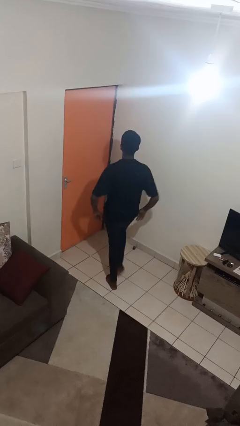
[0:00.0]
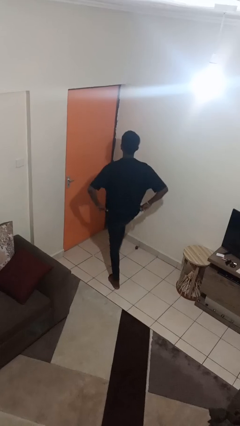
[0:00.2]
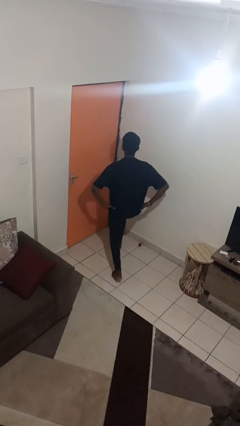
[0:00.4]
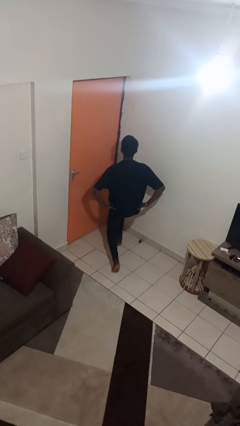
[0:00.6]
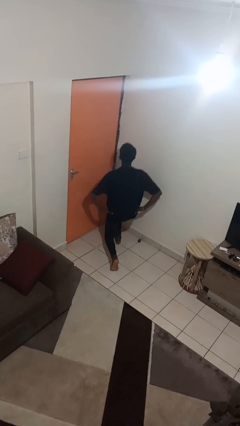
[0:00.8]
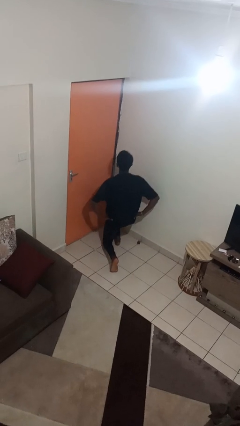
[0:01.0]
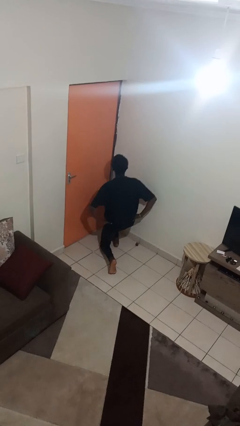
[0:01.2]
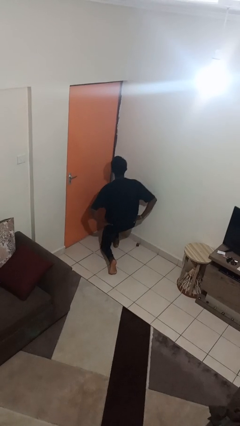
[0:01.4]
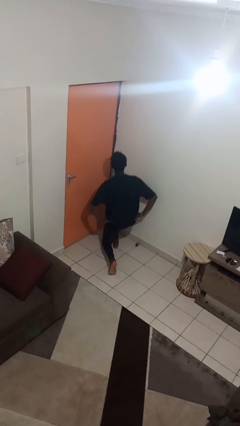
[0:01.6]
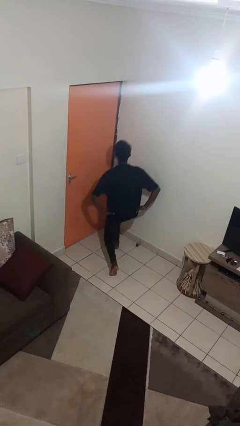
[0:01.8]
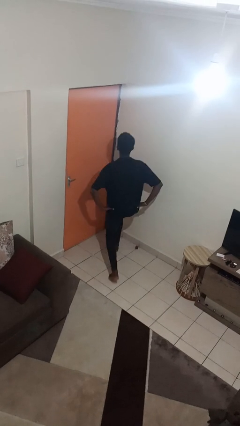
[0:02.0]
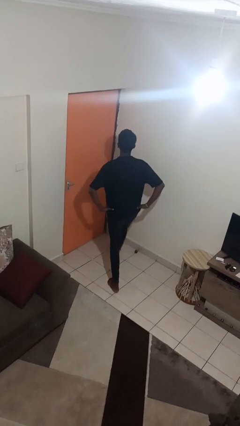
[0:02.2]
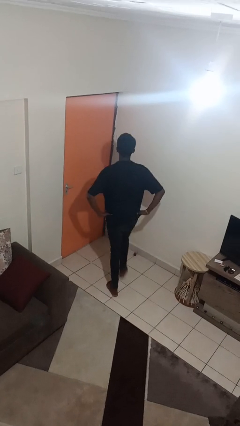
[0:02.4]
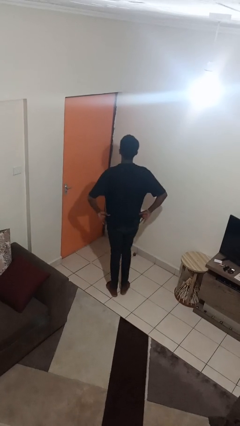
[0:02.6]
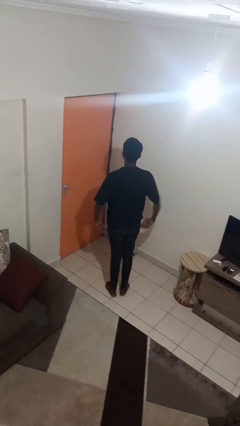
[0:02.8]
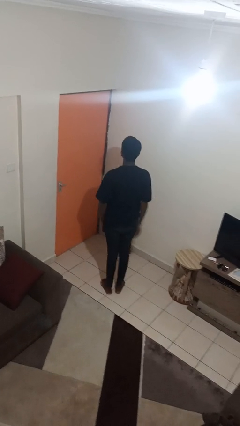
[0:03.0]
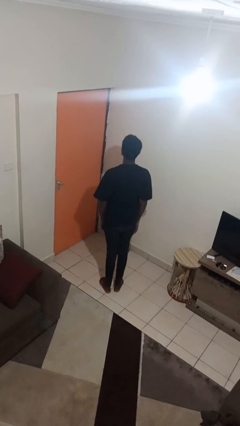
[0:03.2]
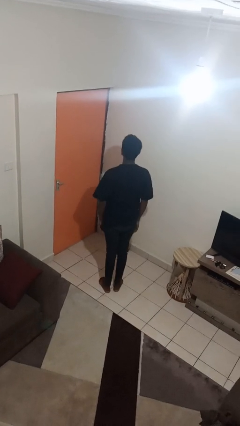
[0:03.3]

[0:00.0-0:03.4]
person exercises with lunges

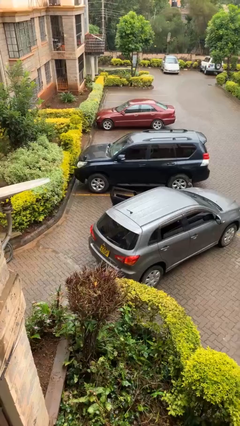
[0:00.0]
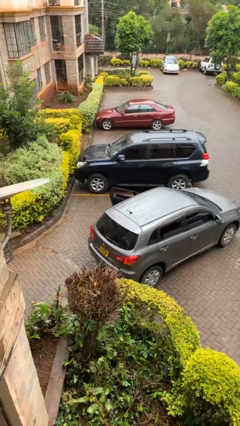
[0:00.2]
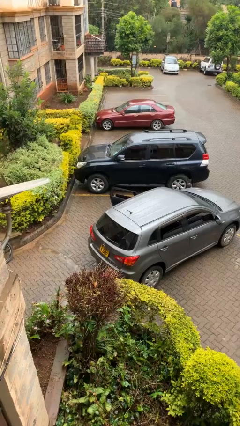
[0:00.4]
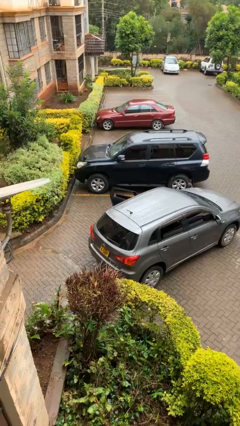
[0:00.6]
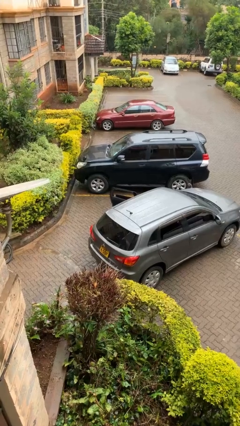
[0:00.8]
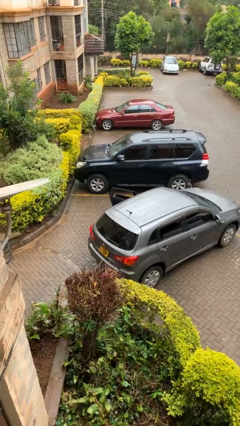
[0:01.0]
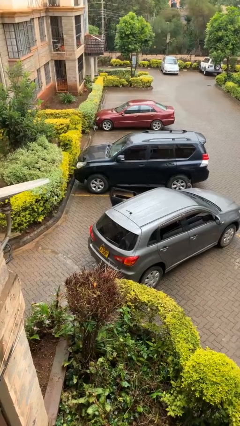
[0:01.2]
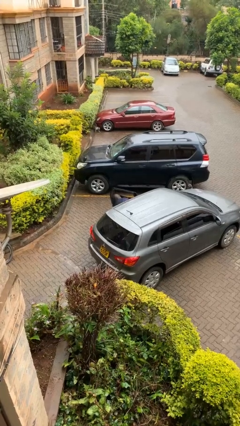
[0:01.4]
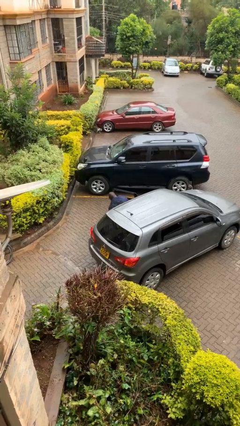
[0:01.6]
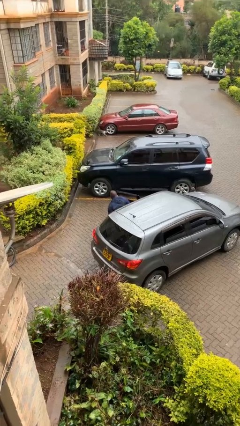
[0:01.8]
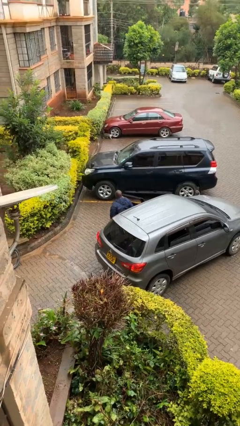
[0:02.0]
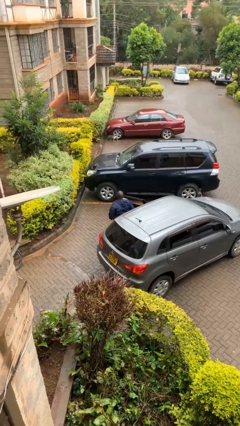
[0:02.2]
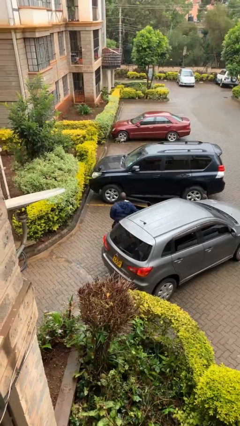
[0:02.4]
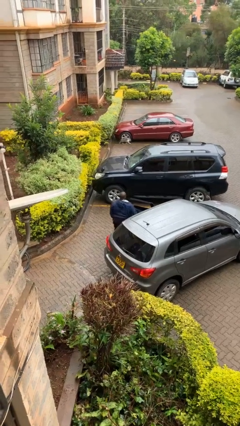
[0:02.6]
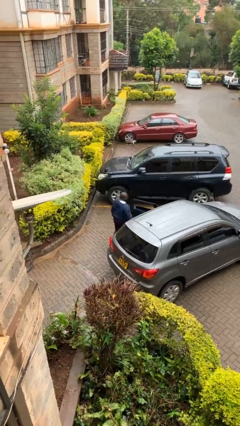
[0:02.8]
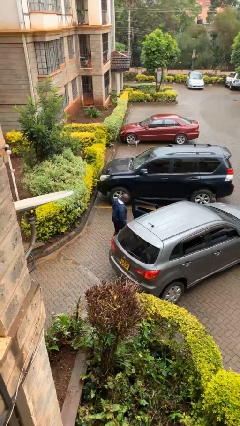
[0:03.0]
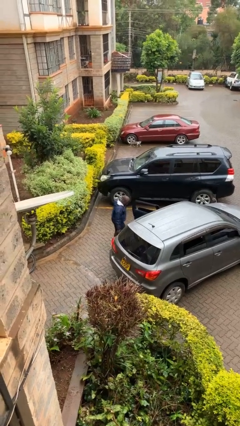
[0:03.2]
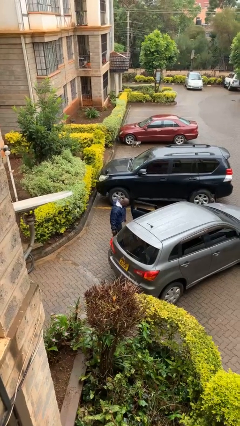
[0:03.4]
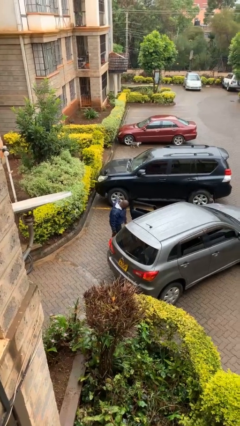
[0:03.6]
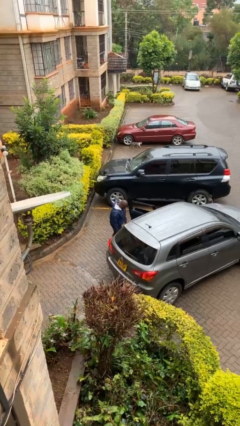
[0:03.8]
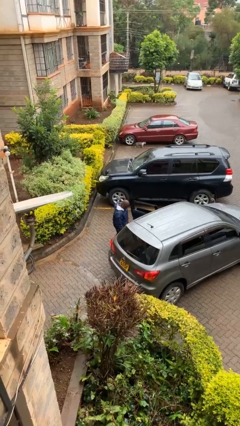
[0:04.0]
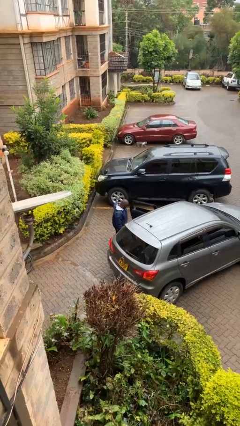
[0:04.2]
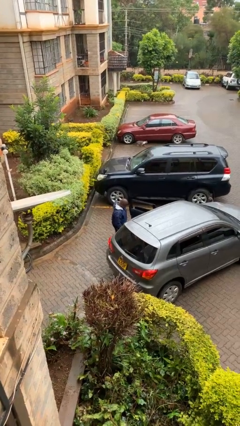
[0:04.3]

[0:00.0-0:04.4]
person exits car

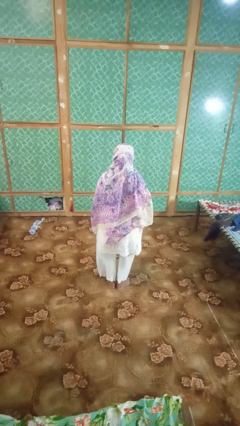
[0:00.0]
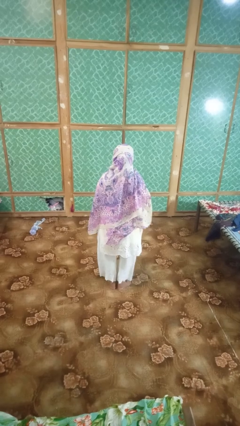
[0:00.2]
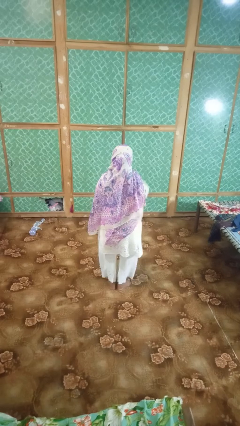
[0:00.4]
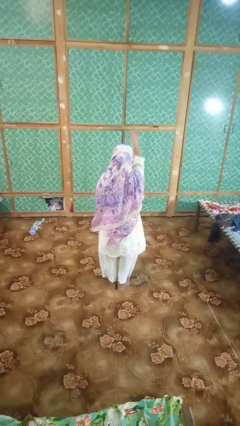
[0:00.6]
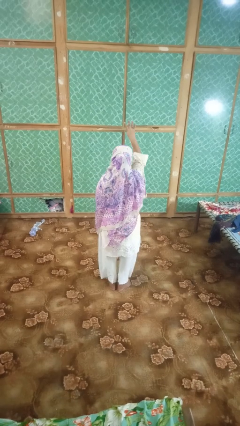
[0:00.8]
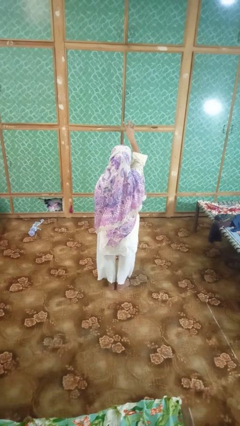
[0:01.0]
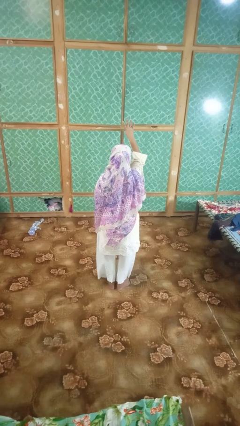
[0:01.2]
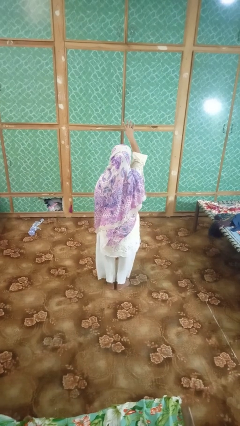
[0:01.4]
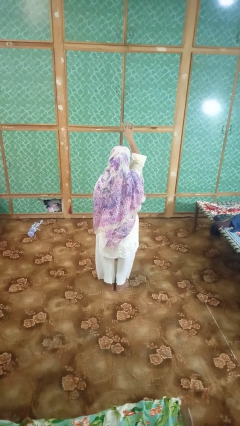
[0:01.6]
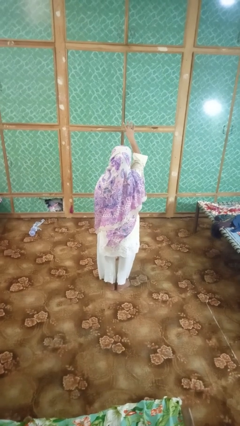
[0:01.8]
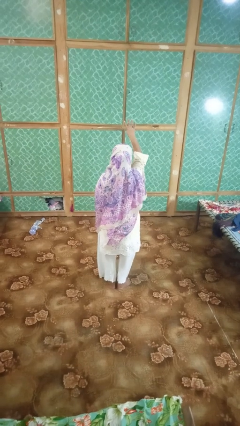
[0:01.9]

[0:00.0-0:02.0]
person gestures number four

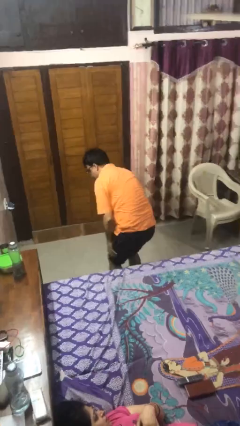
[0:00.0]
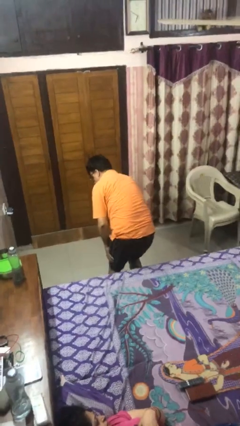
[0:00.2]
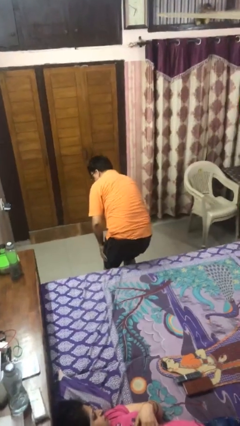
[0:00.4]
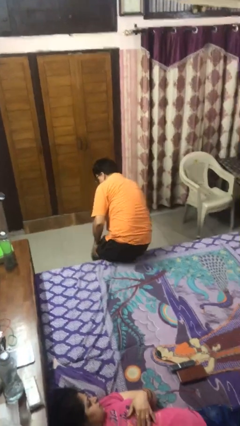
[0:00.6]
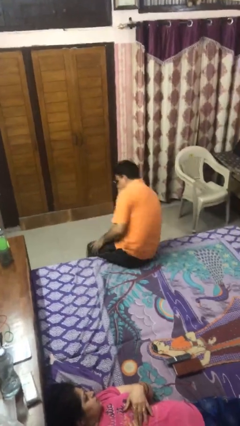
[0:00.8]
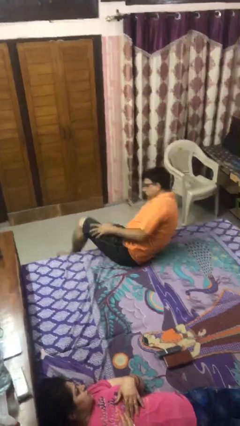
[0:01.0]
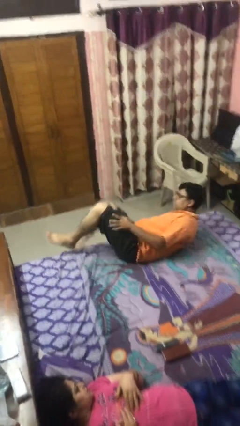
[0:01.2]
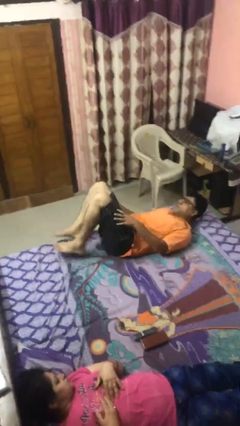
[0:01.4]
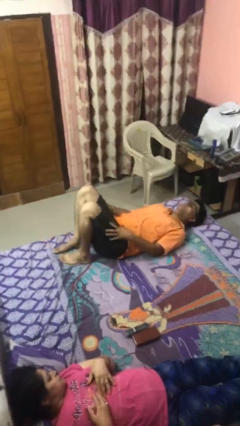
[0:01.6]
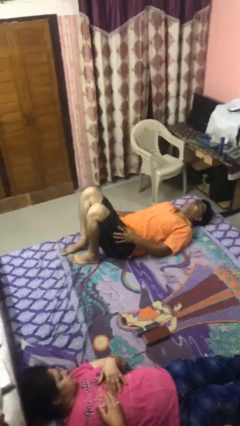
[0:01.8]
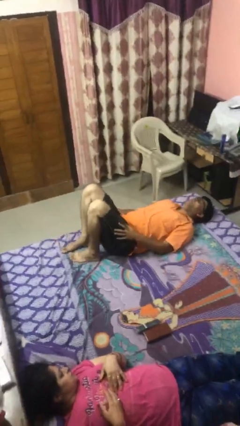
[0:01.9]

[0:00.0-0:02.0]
person lies down on bed

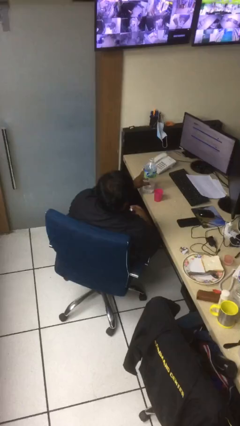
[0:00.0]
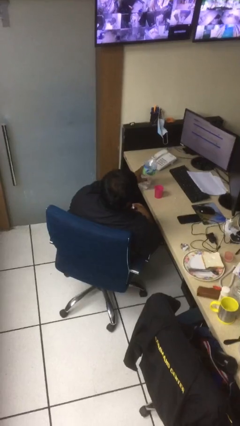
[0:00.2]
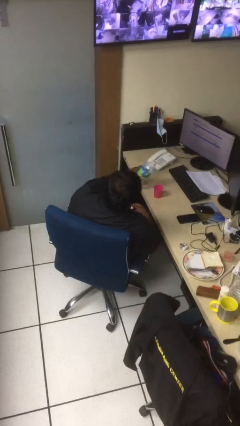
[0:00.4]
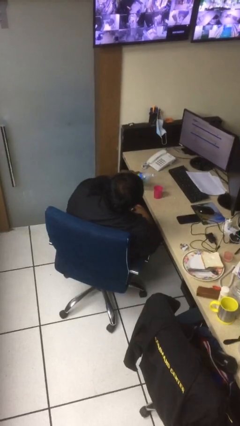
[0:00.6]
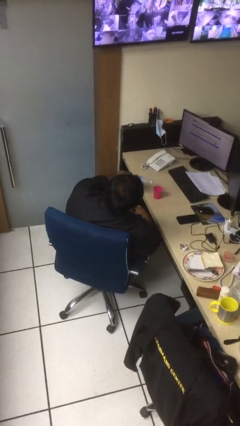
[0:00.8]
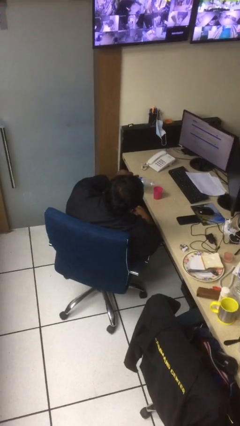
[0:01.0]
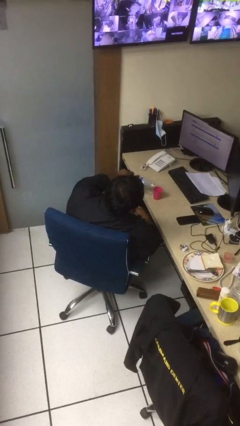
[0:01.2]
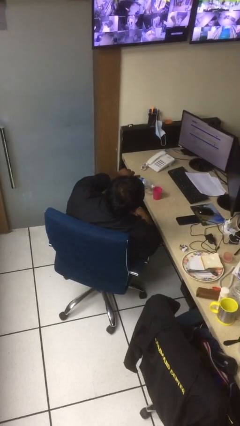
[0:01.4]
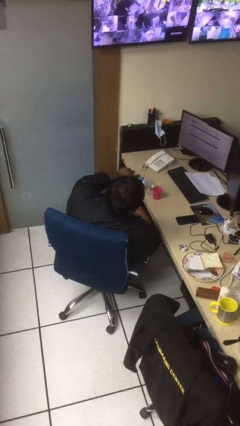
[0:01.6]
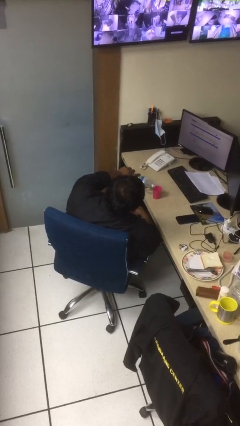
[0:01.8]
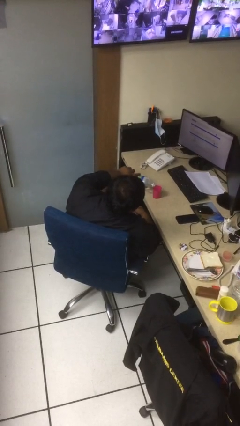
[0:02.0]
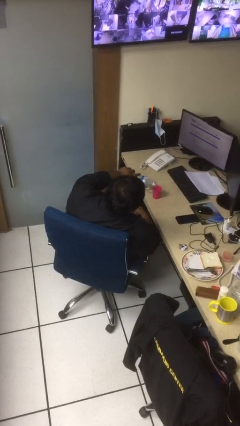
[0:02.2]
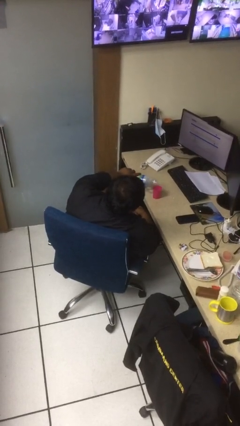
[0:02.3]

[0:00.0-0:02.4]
person pours liquid into cup

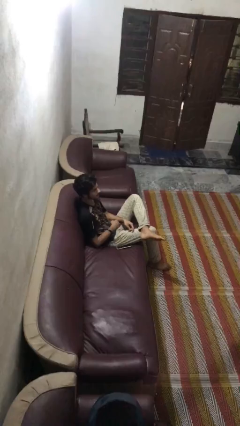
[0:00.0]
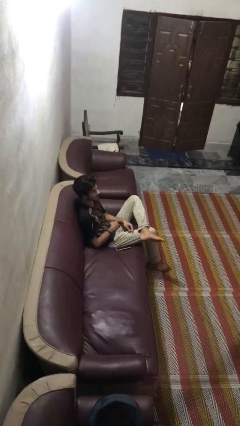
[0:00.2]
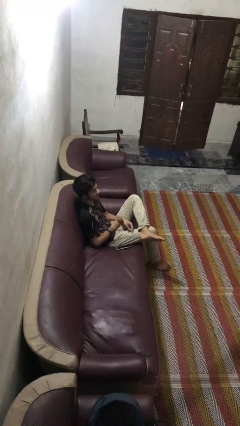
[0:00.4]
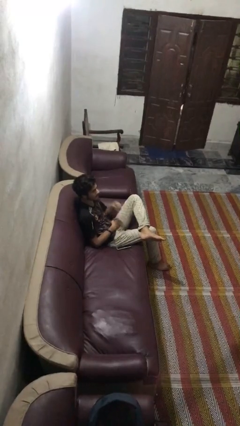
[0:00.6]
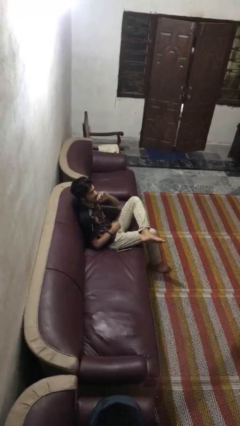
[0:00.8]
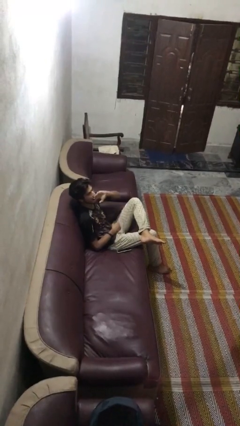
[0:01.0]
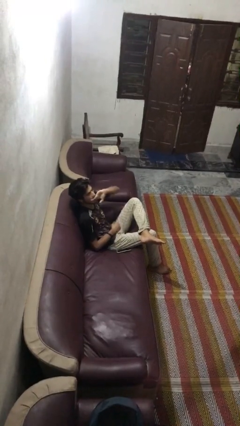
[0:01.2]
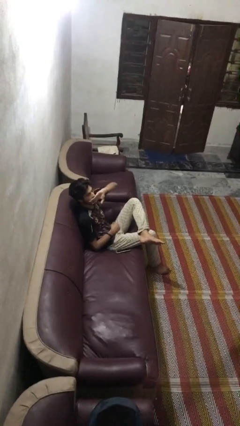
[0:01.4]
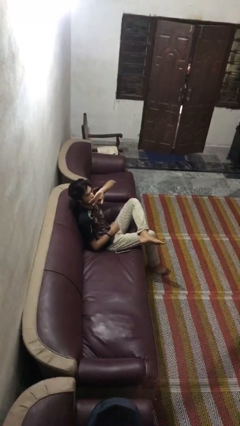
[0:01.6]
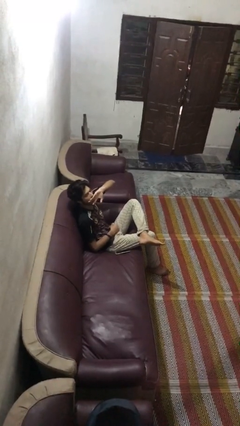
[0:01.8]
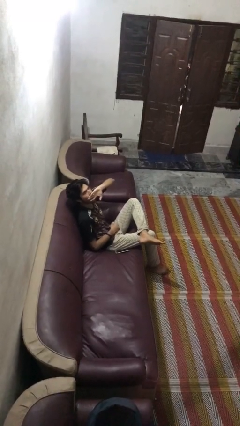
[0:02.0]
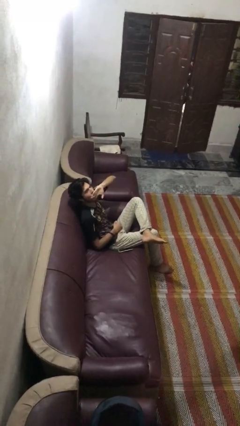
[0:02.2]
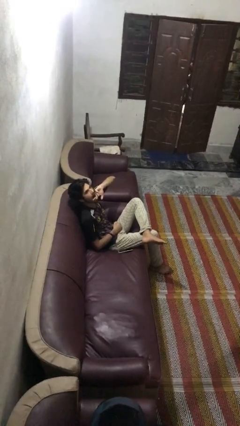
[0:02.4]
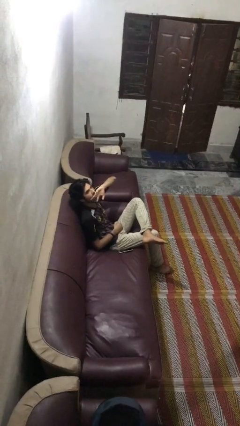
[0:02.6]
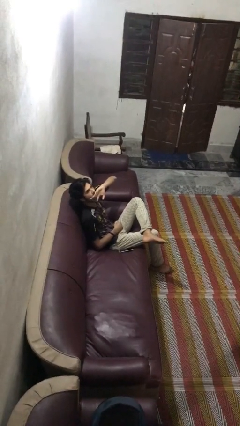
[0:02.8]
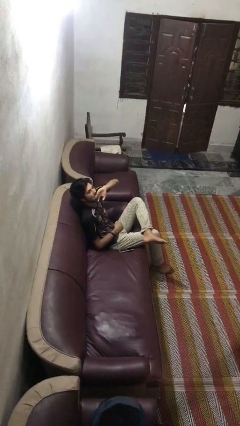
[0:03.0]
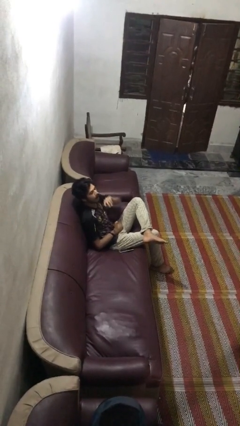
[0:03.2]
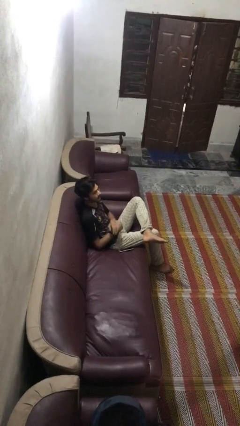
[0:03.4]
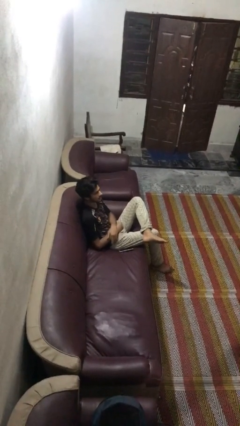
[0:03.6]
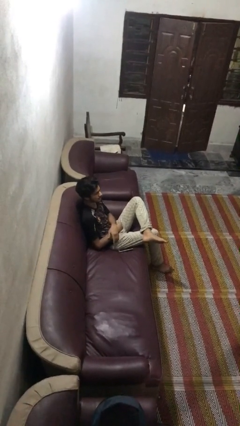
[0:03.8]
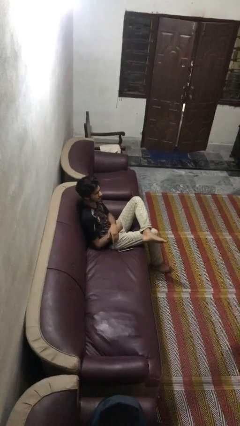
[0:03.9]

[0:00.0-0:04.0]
person yawns
